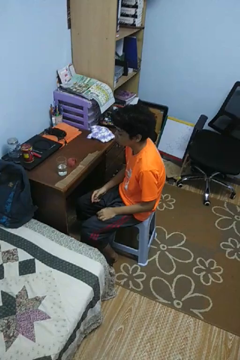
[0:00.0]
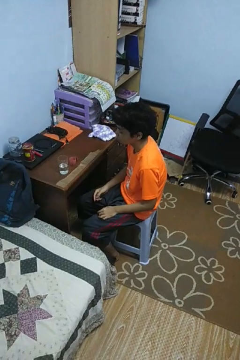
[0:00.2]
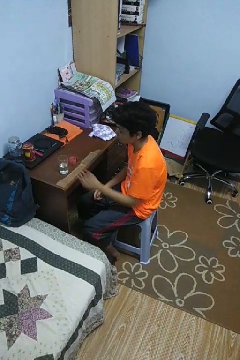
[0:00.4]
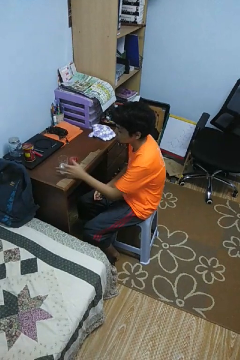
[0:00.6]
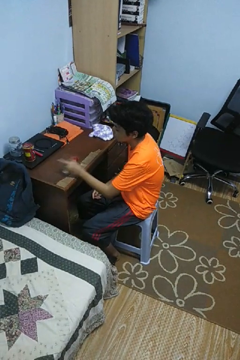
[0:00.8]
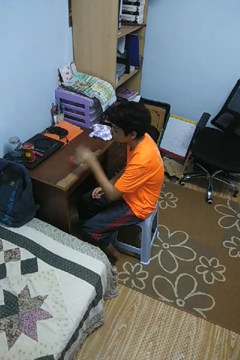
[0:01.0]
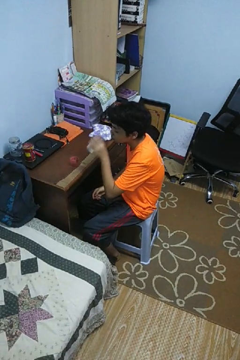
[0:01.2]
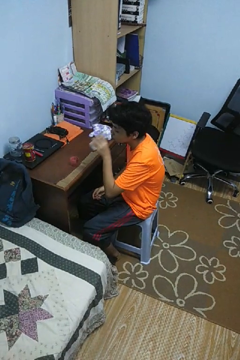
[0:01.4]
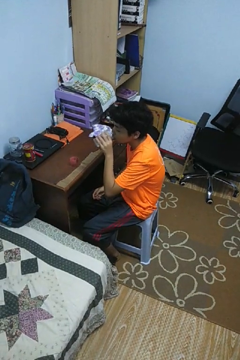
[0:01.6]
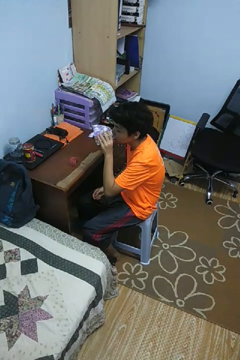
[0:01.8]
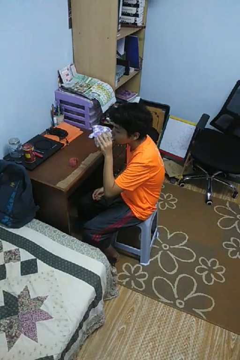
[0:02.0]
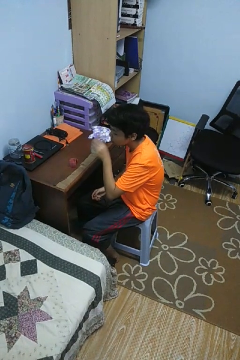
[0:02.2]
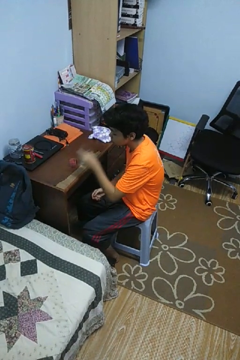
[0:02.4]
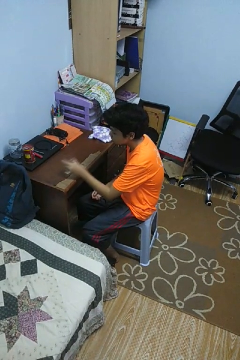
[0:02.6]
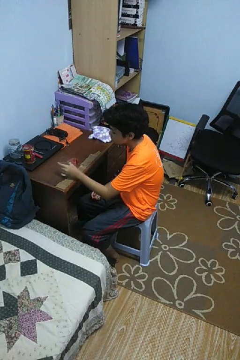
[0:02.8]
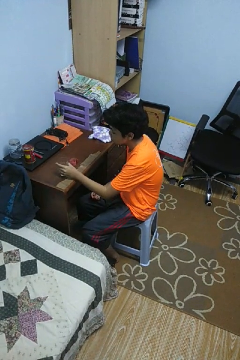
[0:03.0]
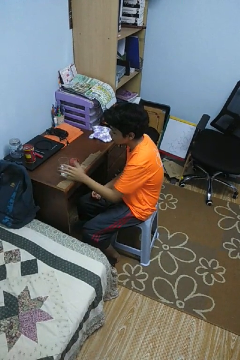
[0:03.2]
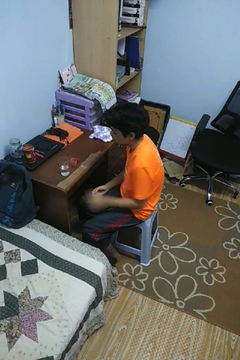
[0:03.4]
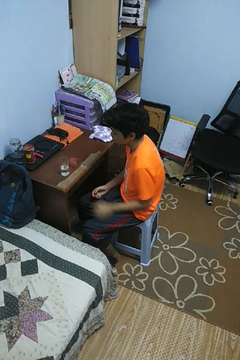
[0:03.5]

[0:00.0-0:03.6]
person drinks from cup

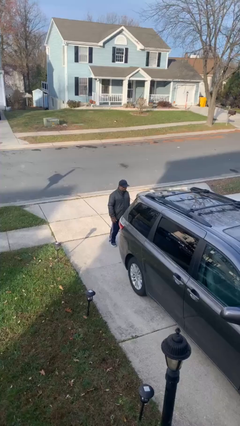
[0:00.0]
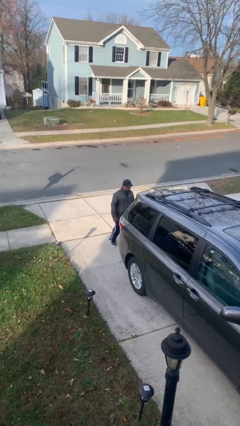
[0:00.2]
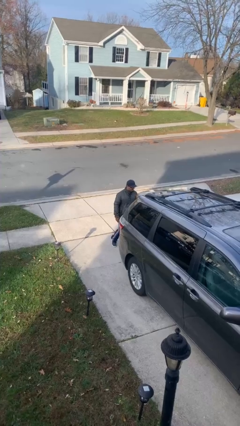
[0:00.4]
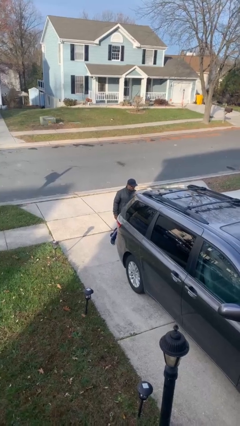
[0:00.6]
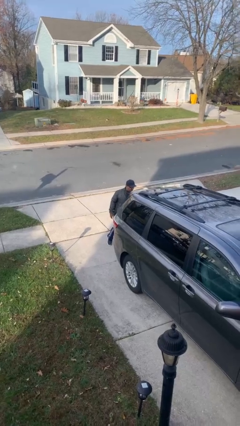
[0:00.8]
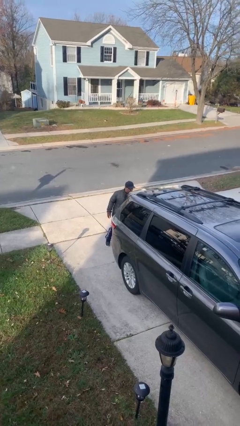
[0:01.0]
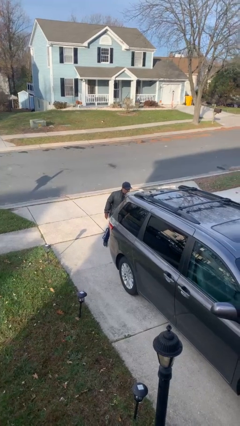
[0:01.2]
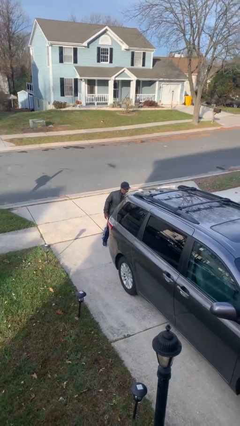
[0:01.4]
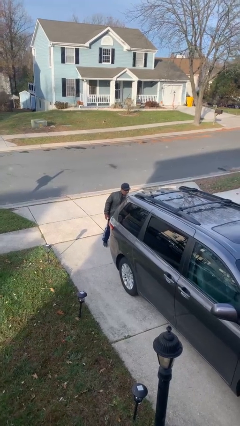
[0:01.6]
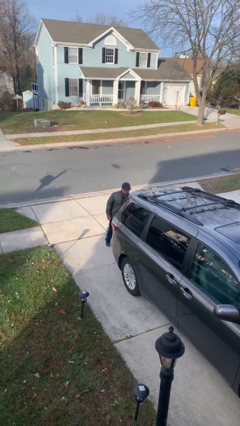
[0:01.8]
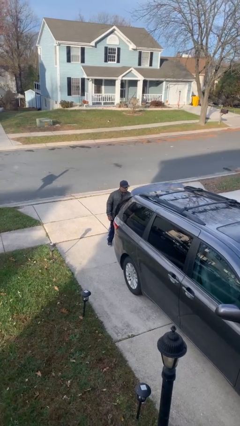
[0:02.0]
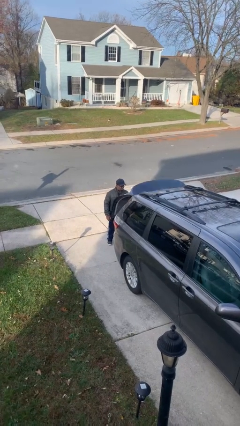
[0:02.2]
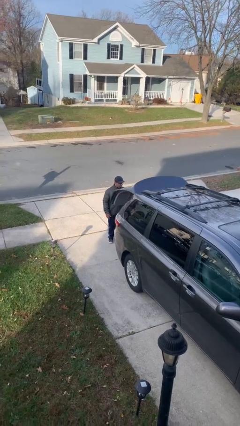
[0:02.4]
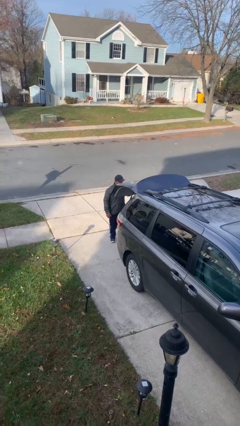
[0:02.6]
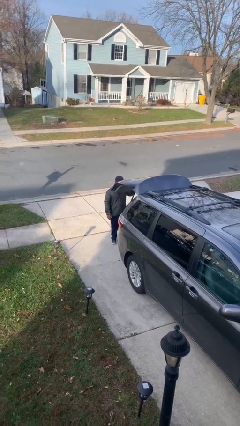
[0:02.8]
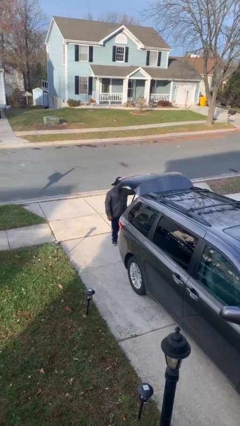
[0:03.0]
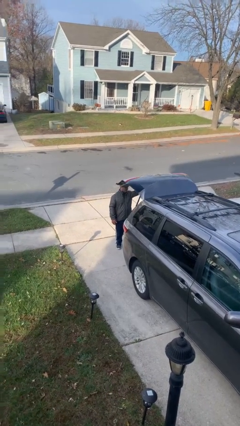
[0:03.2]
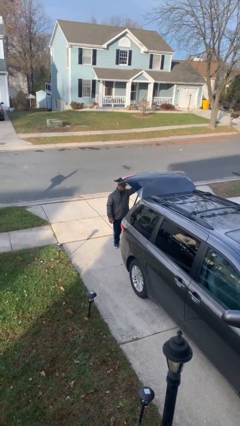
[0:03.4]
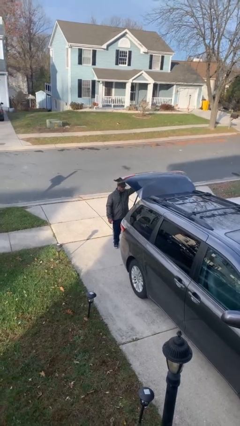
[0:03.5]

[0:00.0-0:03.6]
person opens car trunk

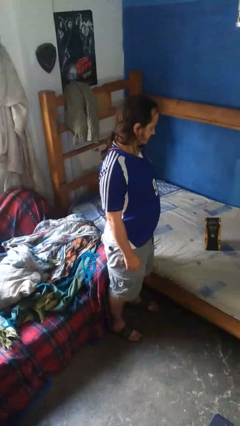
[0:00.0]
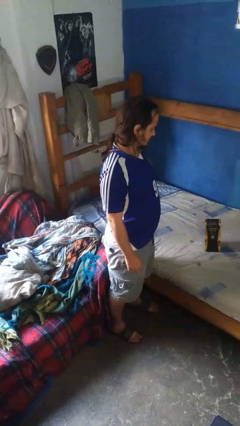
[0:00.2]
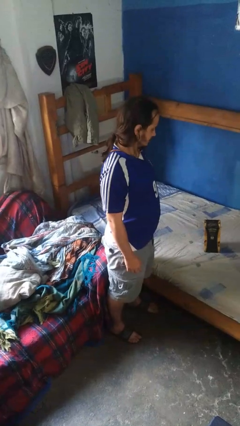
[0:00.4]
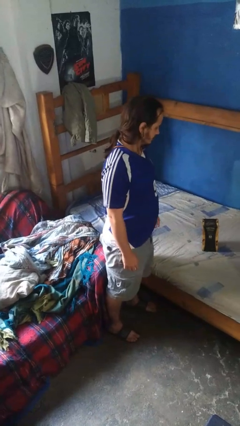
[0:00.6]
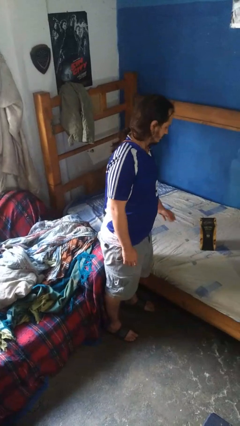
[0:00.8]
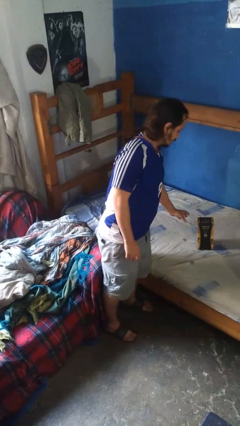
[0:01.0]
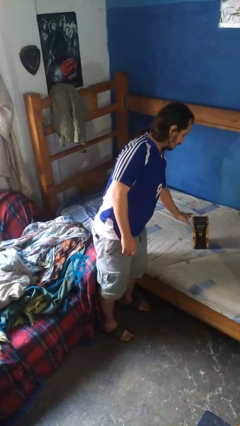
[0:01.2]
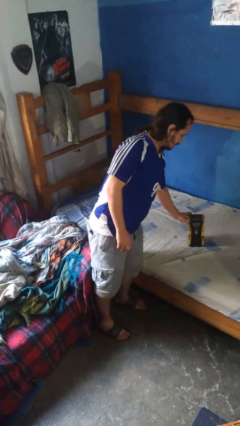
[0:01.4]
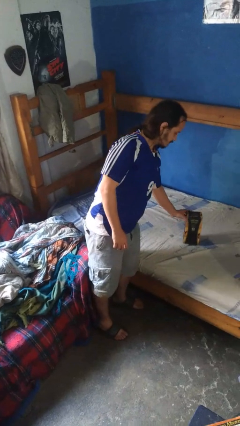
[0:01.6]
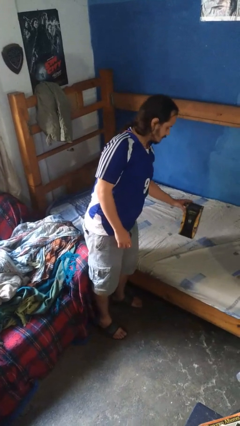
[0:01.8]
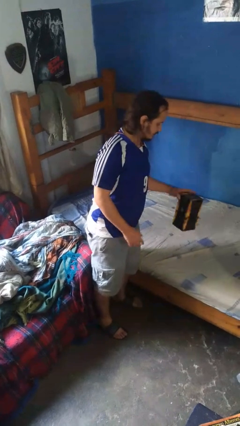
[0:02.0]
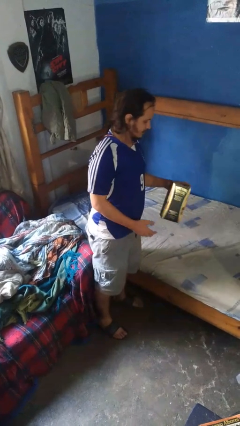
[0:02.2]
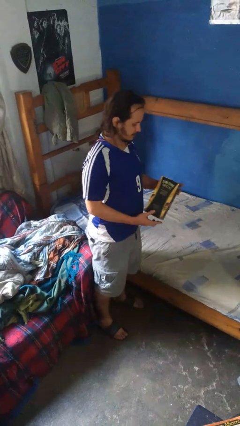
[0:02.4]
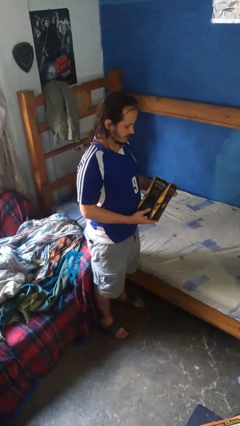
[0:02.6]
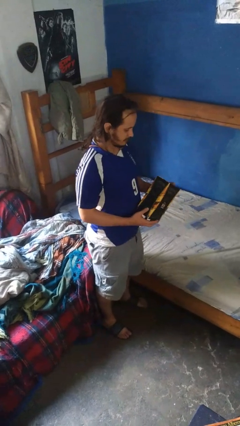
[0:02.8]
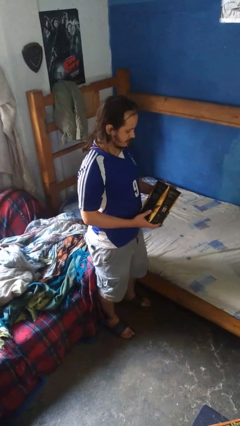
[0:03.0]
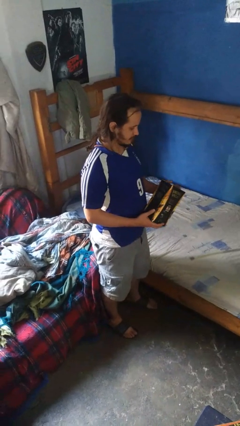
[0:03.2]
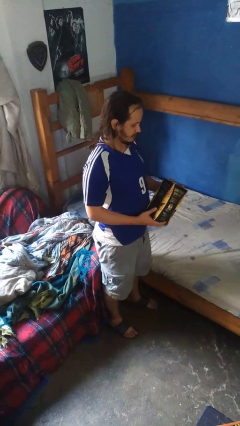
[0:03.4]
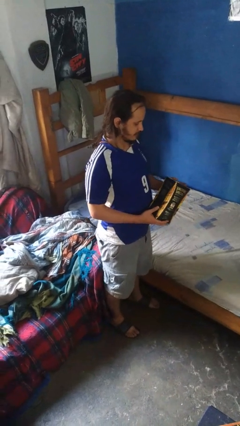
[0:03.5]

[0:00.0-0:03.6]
person picks up object from bed

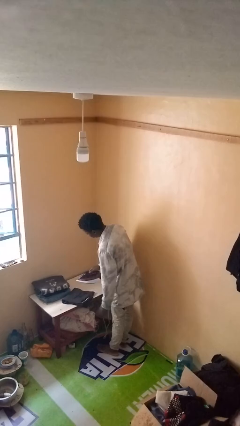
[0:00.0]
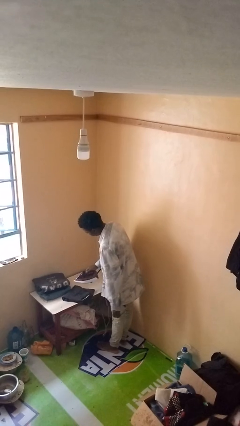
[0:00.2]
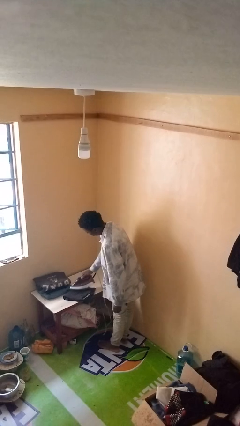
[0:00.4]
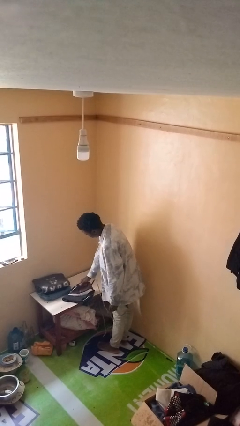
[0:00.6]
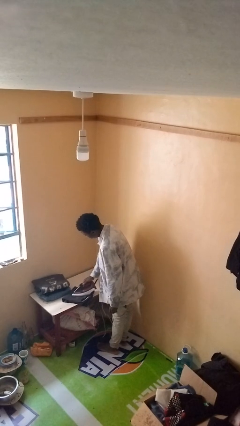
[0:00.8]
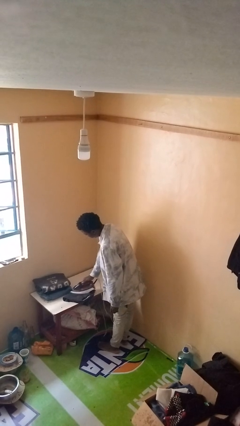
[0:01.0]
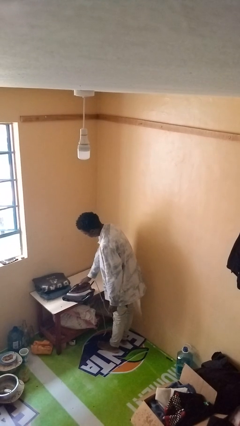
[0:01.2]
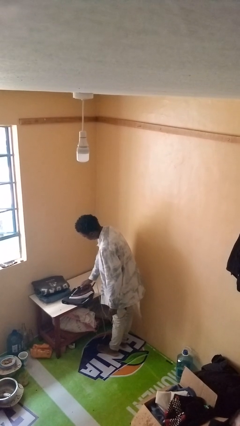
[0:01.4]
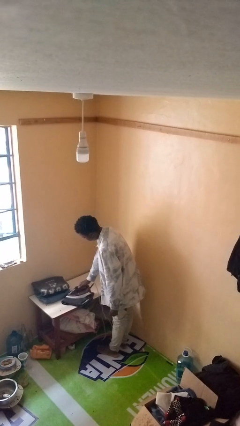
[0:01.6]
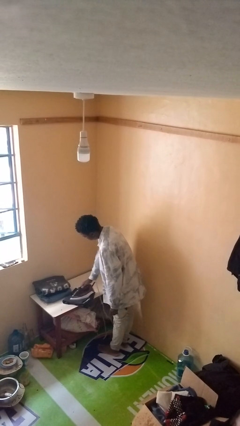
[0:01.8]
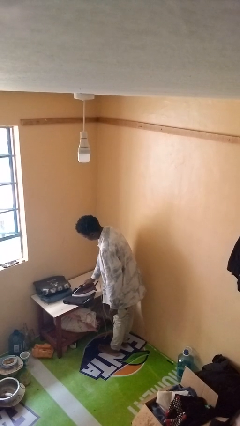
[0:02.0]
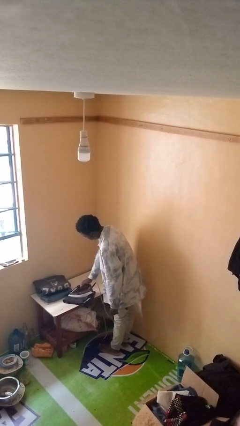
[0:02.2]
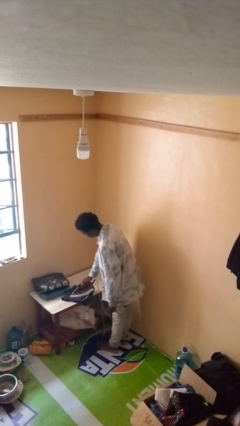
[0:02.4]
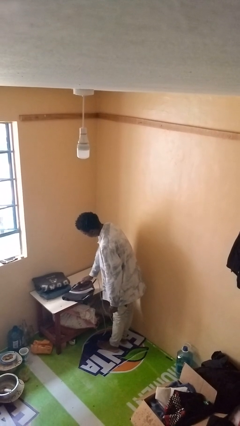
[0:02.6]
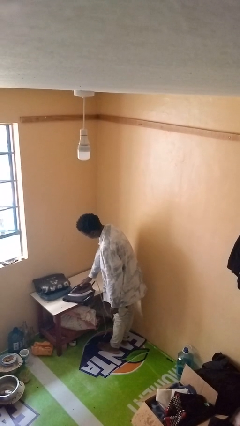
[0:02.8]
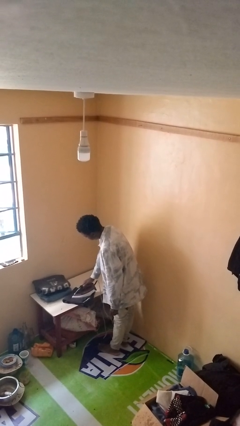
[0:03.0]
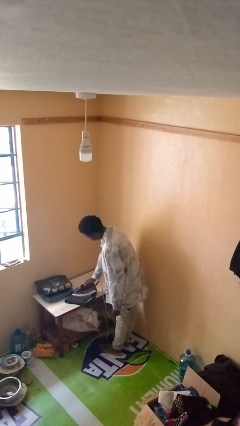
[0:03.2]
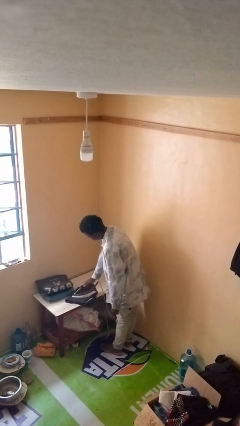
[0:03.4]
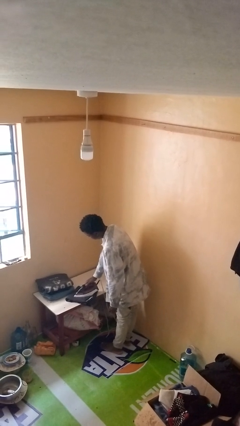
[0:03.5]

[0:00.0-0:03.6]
person irons clothes

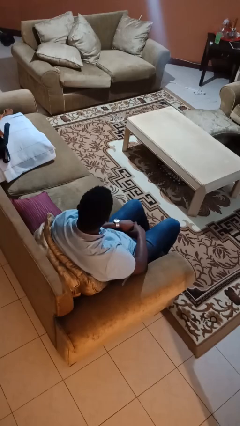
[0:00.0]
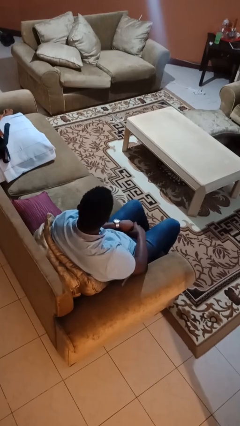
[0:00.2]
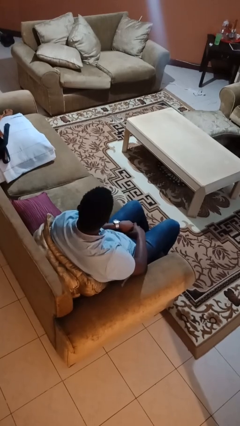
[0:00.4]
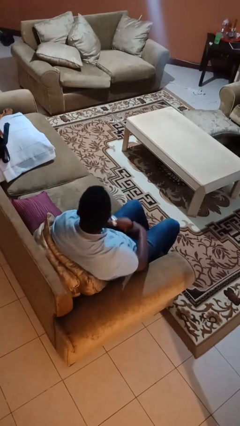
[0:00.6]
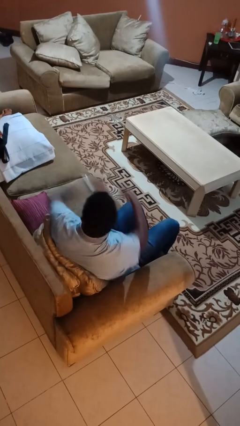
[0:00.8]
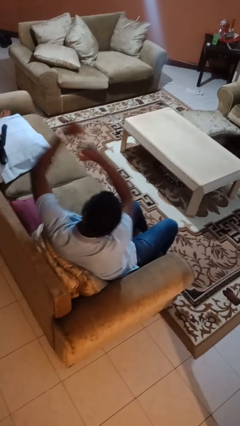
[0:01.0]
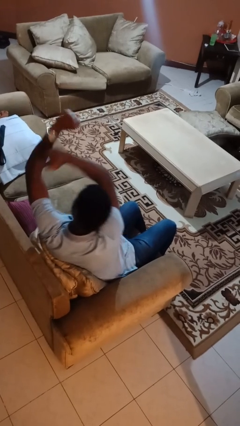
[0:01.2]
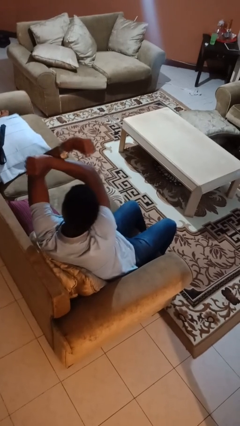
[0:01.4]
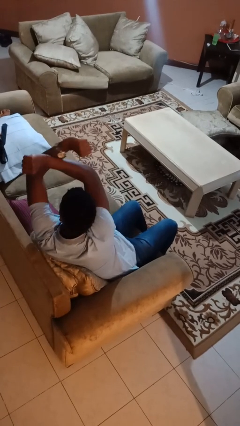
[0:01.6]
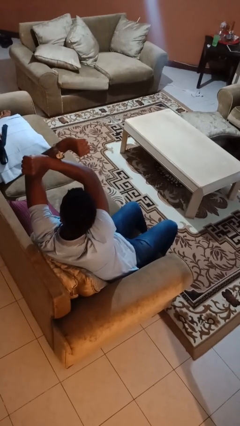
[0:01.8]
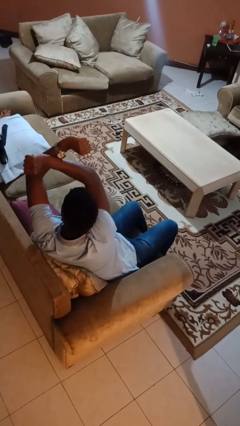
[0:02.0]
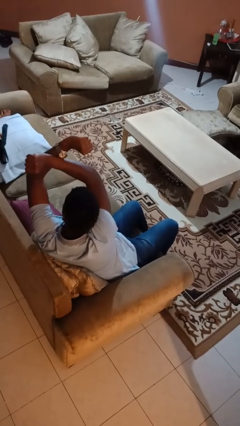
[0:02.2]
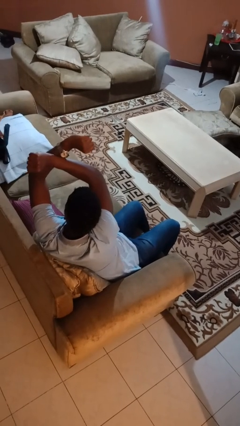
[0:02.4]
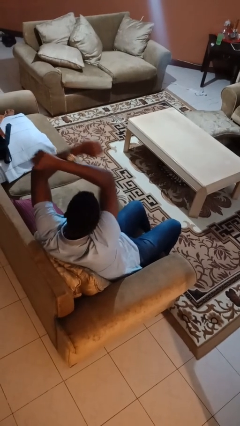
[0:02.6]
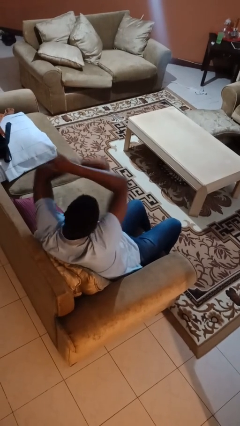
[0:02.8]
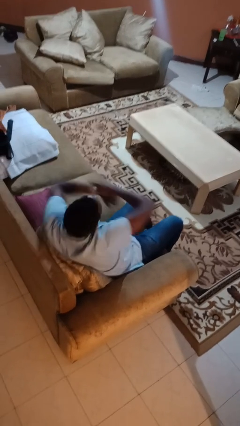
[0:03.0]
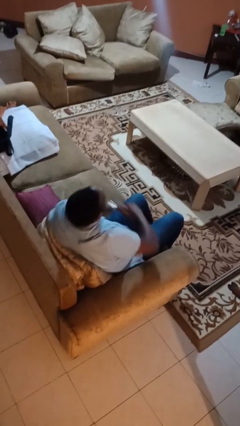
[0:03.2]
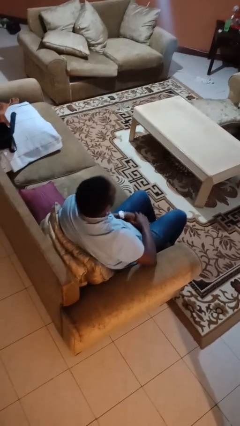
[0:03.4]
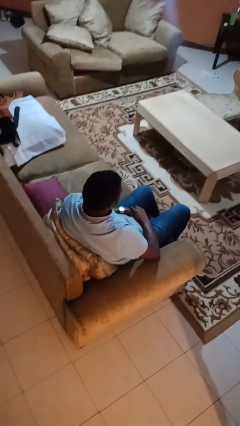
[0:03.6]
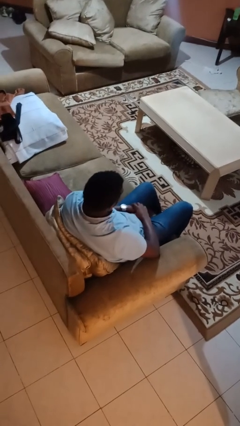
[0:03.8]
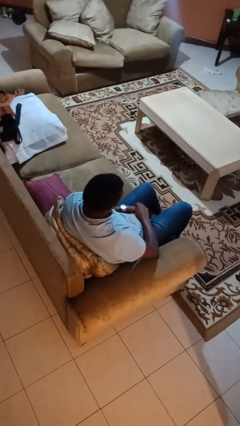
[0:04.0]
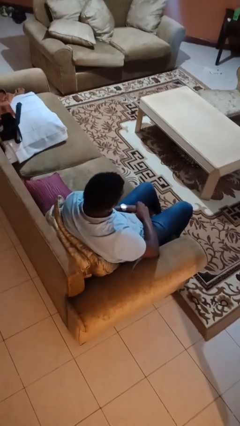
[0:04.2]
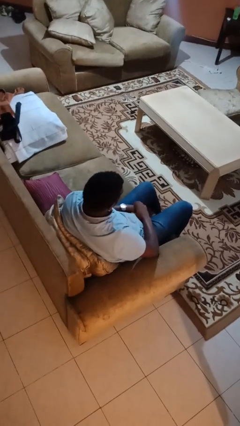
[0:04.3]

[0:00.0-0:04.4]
person gestures arms x
